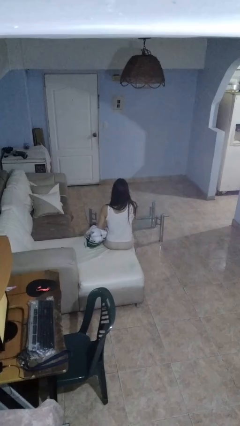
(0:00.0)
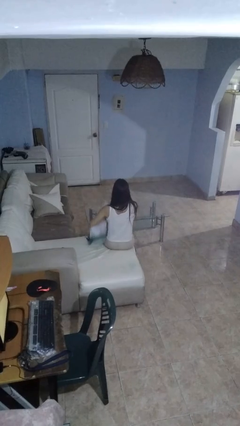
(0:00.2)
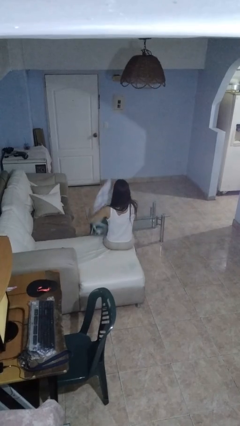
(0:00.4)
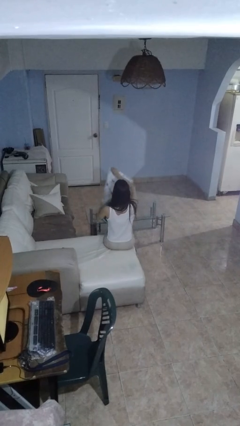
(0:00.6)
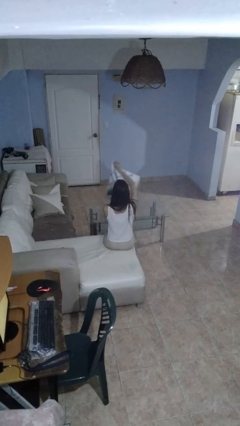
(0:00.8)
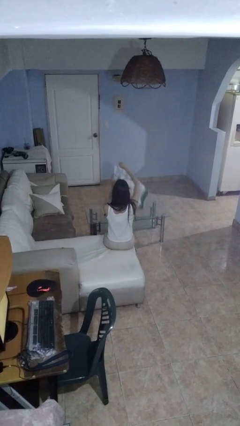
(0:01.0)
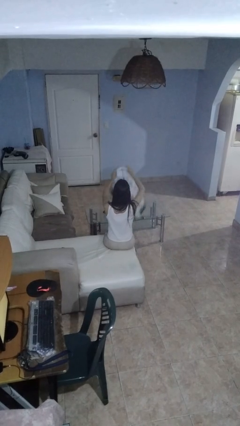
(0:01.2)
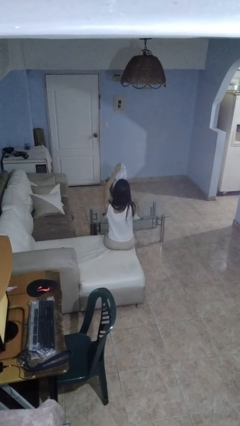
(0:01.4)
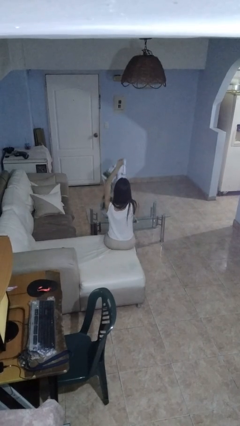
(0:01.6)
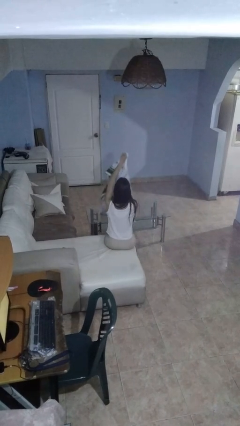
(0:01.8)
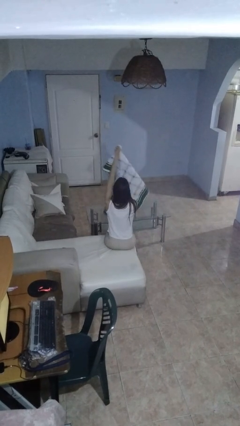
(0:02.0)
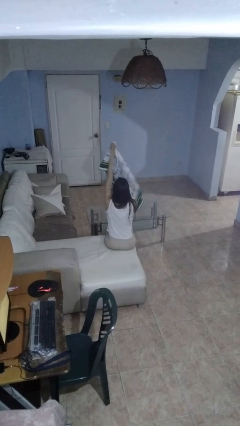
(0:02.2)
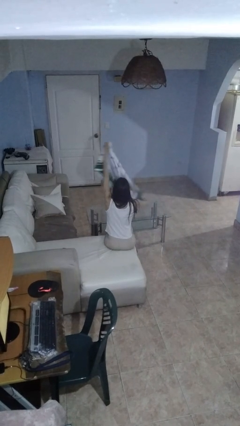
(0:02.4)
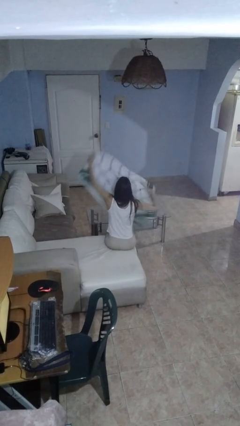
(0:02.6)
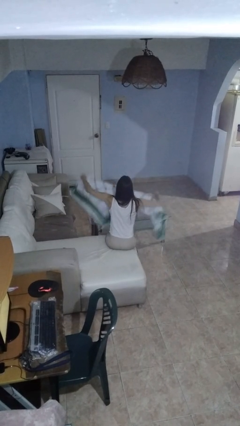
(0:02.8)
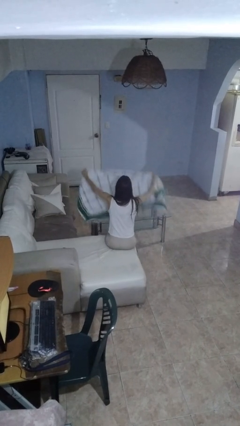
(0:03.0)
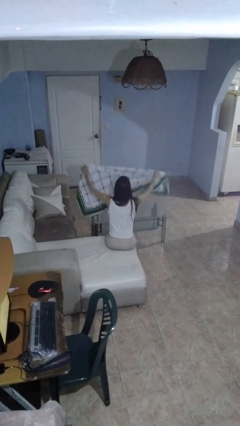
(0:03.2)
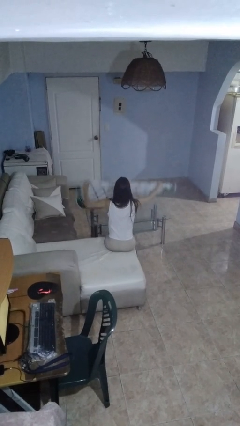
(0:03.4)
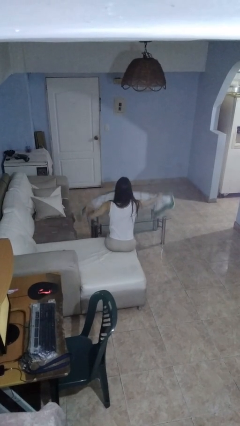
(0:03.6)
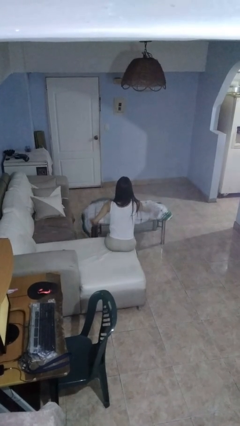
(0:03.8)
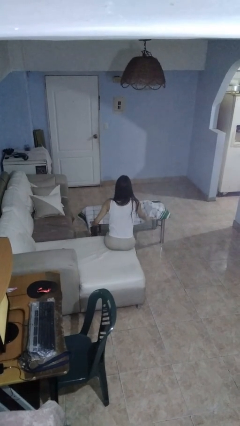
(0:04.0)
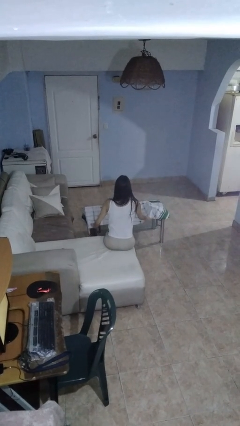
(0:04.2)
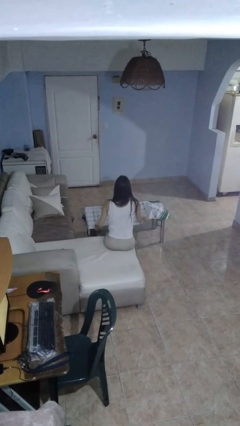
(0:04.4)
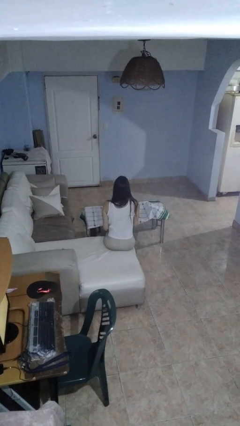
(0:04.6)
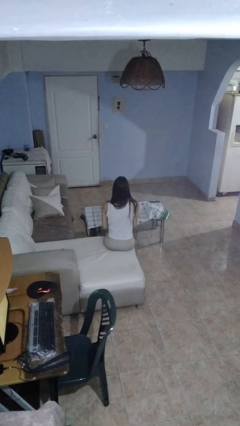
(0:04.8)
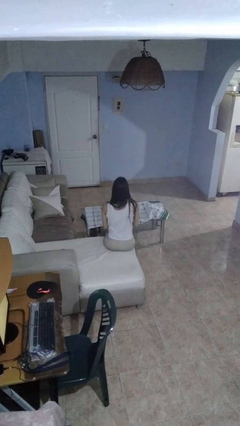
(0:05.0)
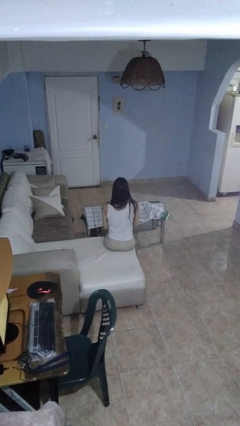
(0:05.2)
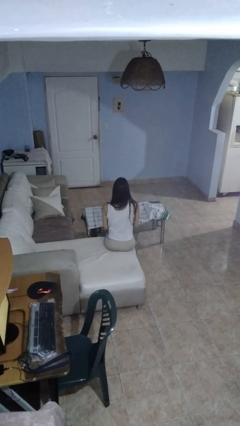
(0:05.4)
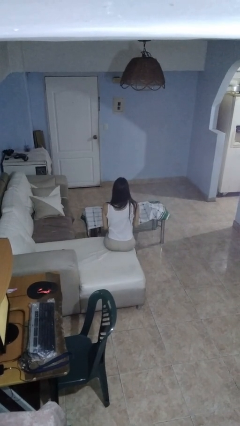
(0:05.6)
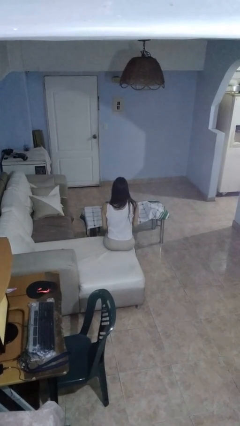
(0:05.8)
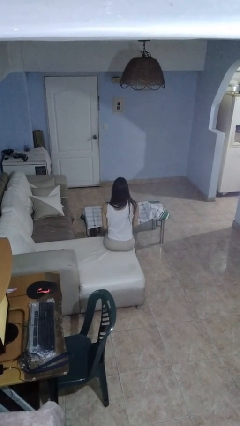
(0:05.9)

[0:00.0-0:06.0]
person spreads tablecloth

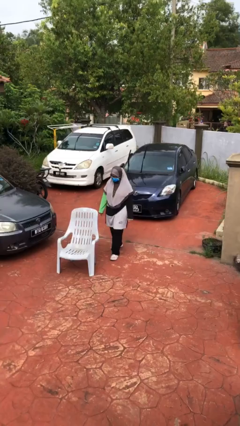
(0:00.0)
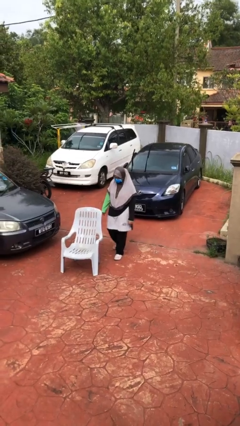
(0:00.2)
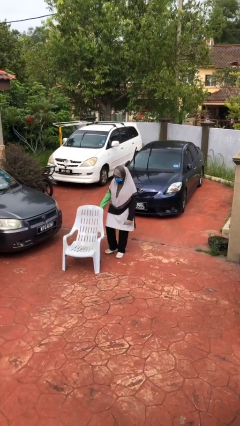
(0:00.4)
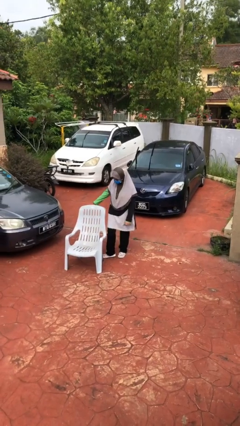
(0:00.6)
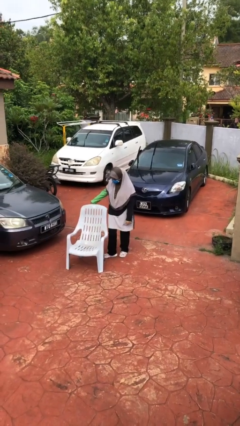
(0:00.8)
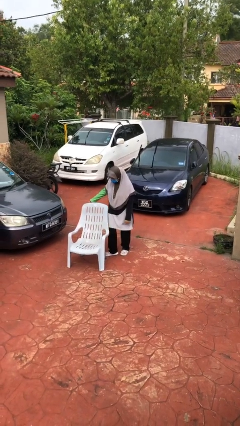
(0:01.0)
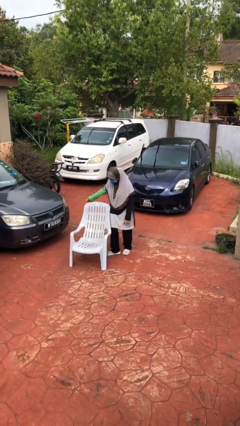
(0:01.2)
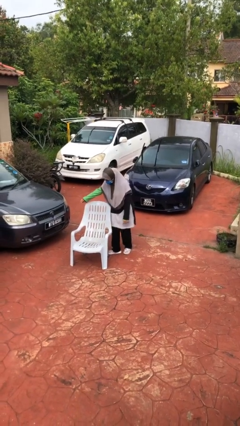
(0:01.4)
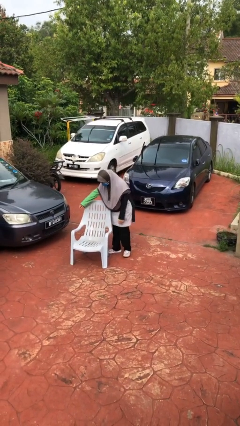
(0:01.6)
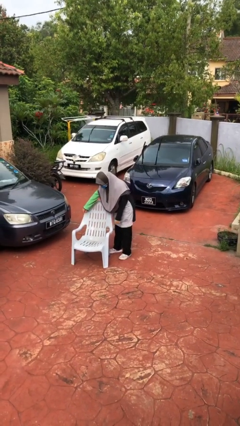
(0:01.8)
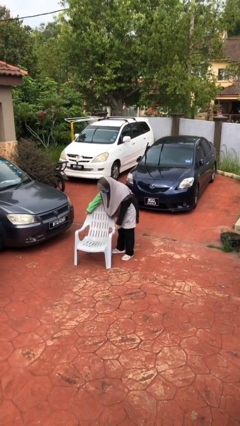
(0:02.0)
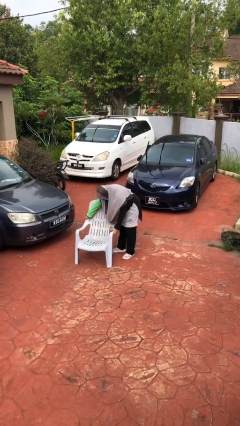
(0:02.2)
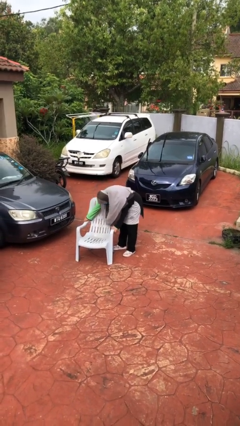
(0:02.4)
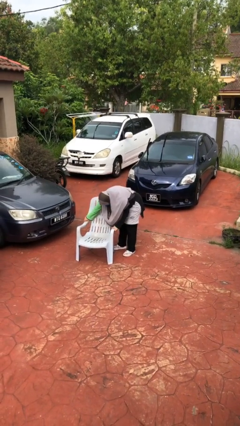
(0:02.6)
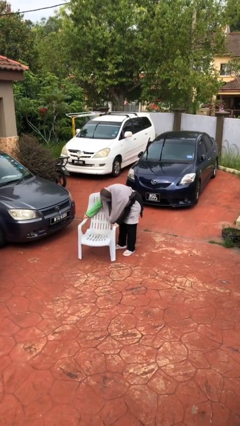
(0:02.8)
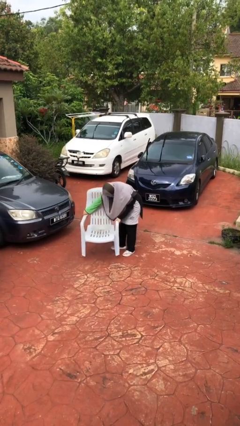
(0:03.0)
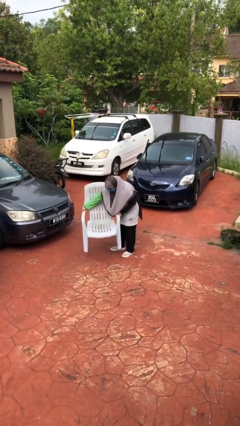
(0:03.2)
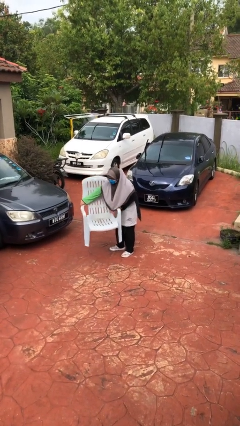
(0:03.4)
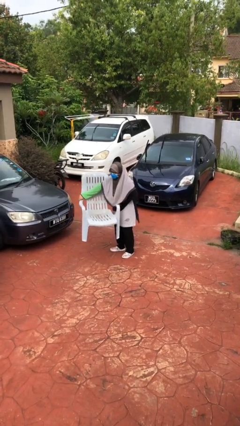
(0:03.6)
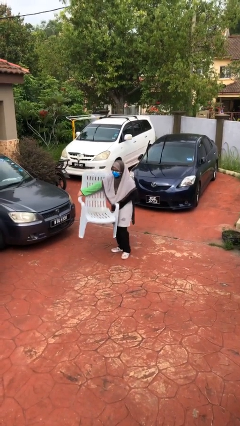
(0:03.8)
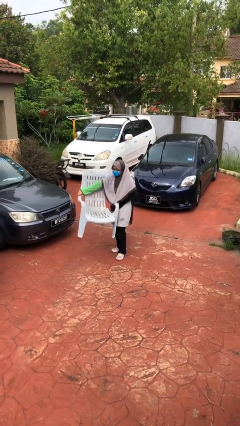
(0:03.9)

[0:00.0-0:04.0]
person picks up object from floor

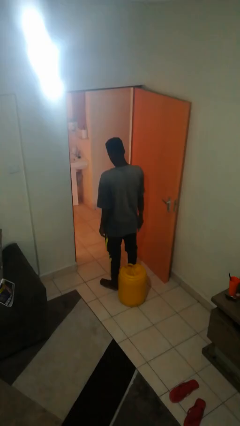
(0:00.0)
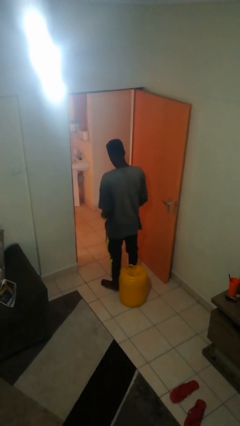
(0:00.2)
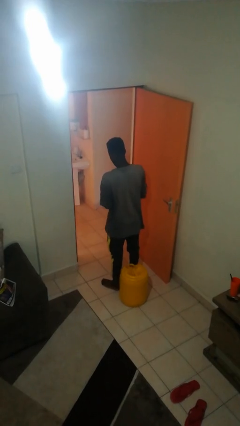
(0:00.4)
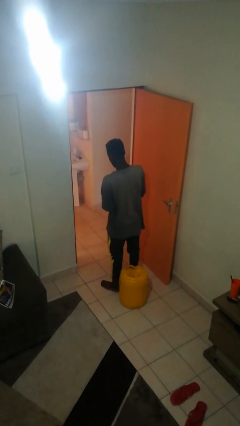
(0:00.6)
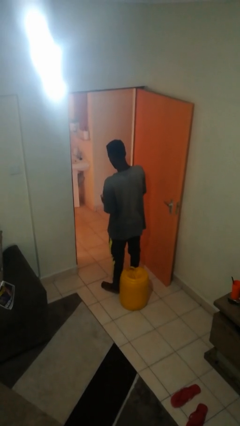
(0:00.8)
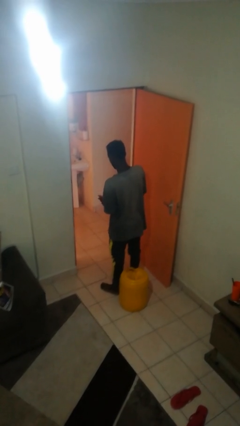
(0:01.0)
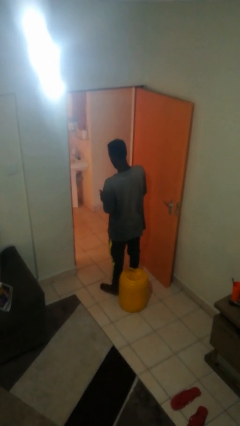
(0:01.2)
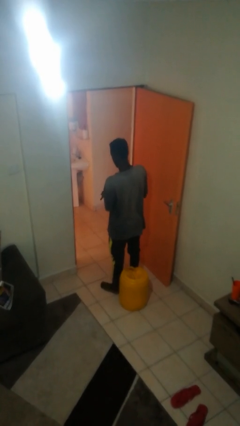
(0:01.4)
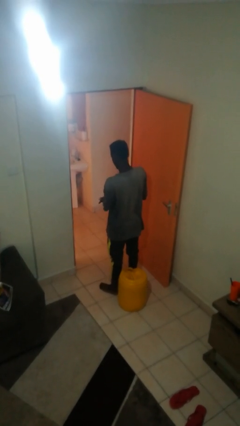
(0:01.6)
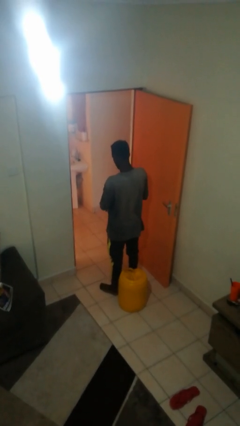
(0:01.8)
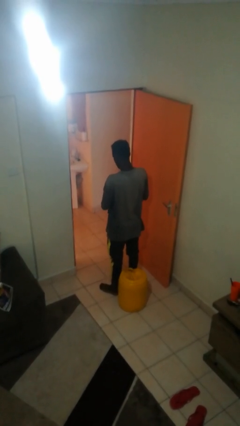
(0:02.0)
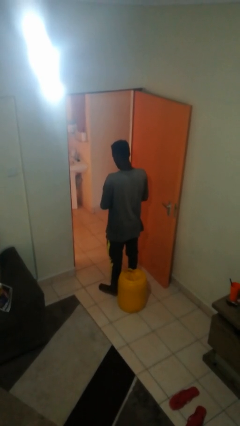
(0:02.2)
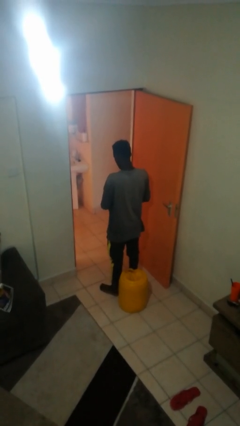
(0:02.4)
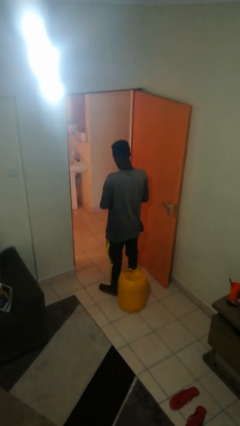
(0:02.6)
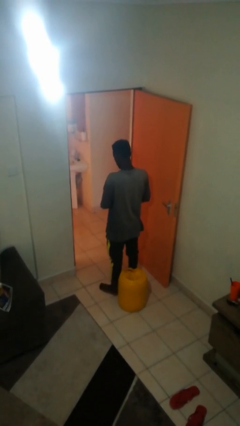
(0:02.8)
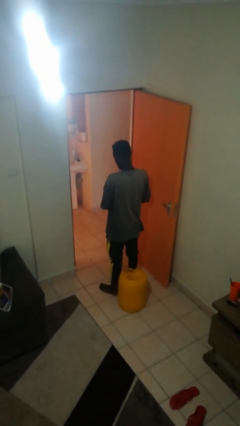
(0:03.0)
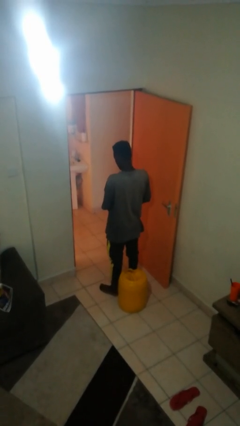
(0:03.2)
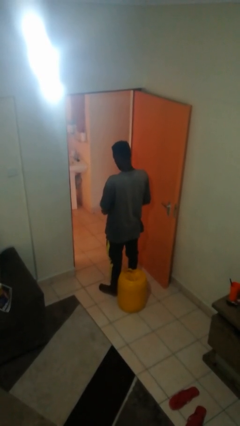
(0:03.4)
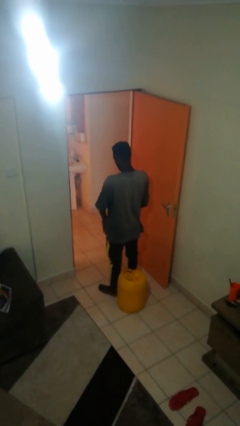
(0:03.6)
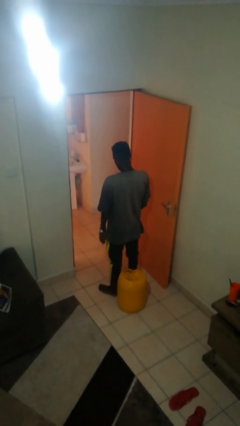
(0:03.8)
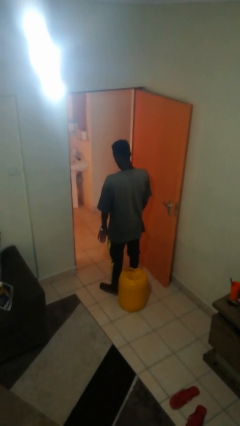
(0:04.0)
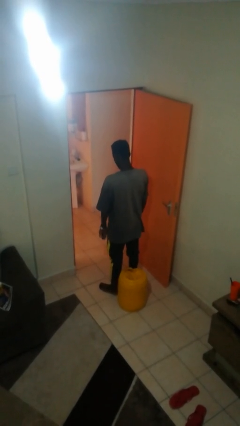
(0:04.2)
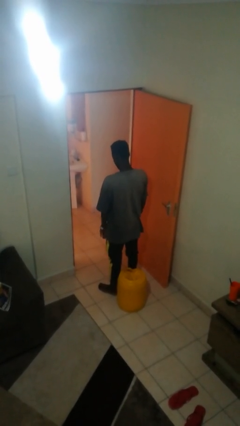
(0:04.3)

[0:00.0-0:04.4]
person puts on wristwatch

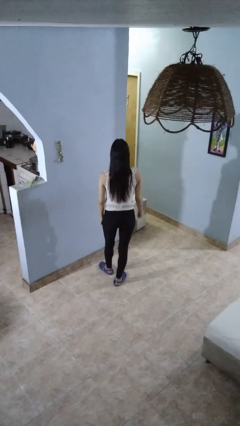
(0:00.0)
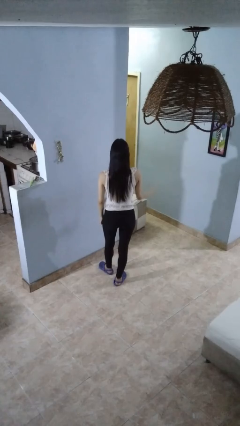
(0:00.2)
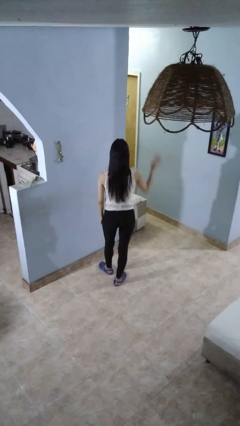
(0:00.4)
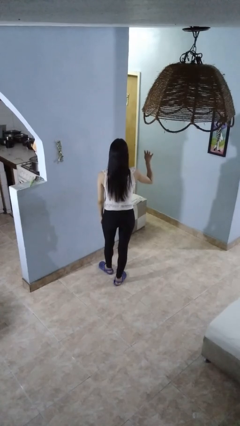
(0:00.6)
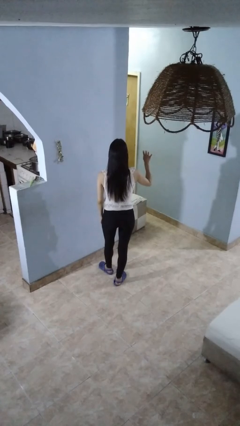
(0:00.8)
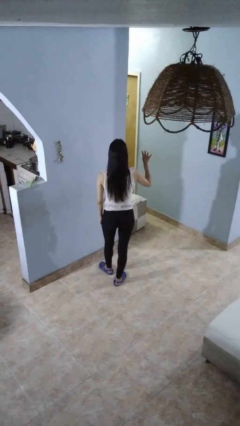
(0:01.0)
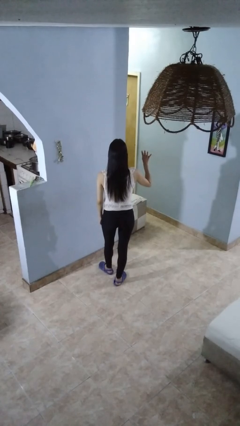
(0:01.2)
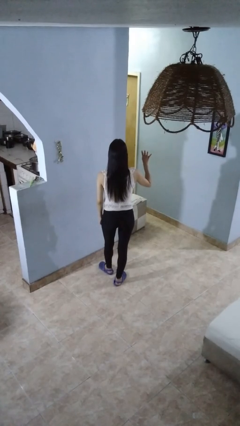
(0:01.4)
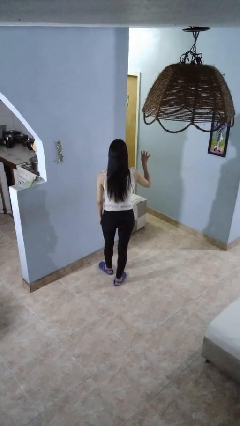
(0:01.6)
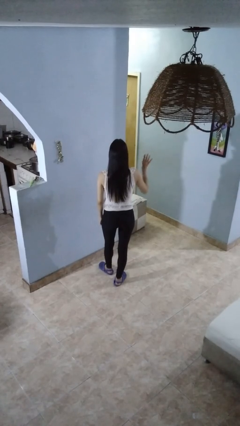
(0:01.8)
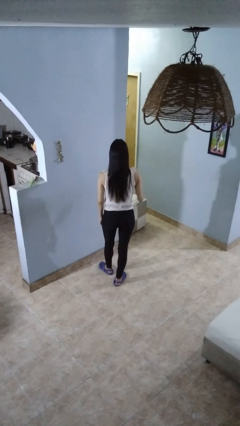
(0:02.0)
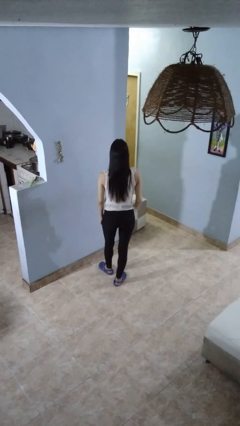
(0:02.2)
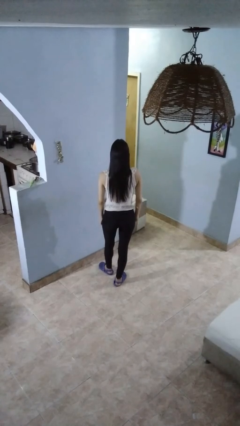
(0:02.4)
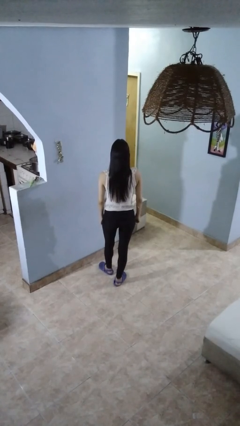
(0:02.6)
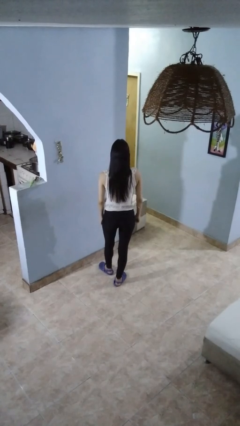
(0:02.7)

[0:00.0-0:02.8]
person gestures number four

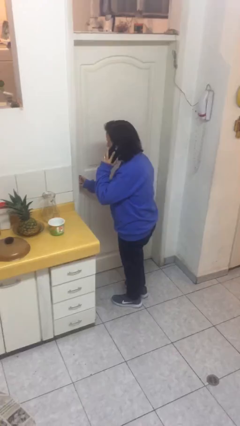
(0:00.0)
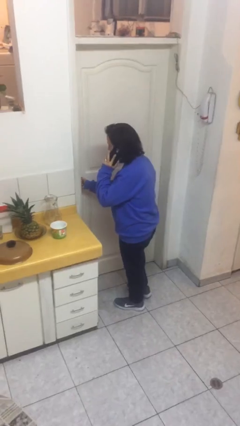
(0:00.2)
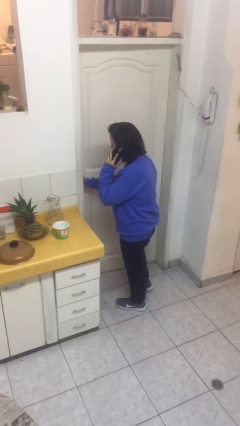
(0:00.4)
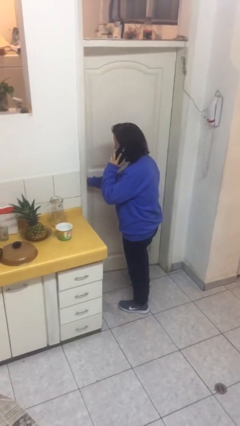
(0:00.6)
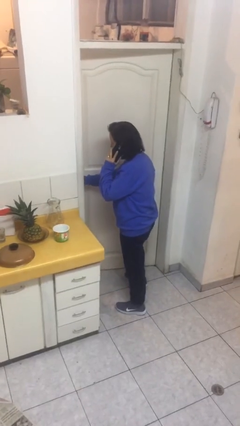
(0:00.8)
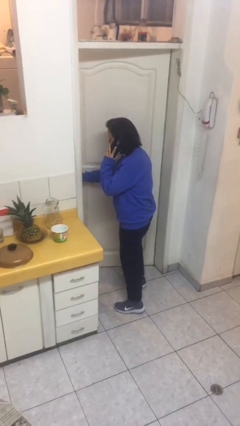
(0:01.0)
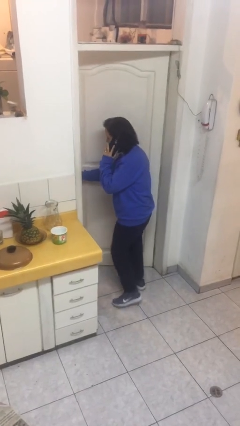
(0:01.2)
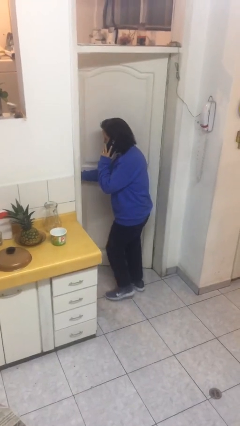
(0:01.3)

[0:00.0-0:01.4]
person opens facility door
